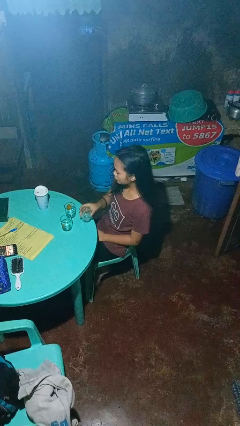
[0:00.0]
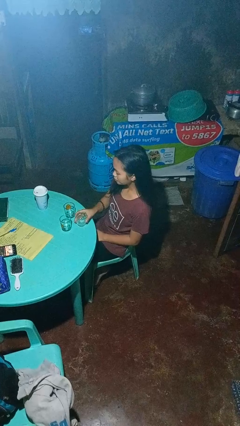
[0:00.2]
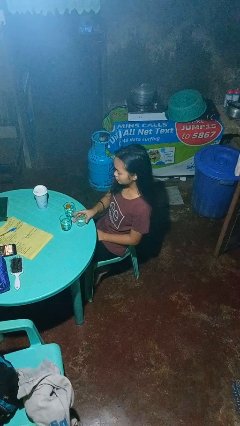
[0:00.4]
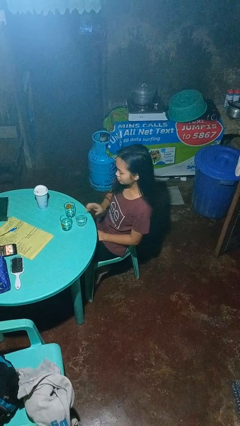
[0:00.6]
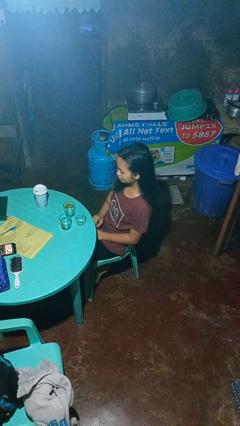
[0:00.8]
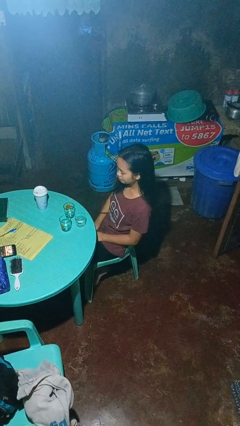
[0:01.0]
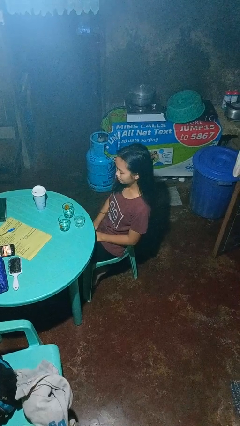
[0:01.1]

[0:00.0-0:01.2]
person puts down object on table

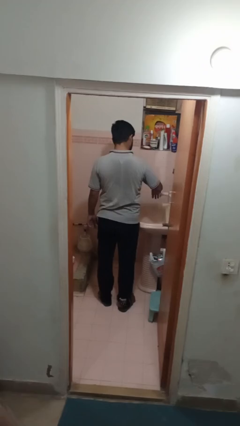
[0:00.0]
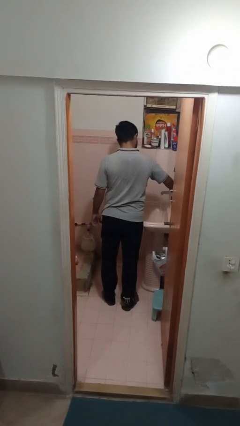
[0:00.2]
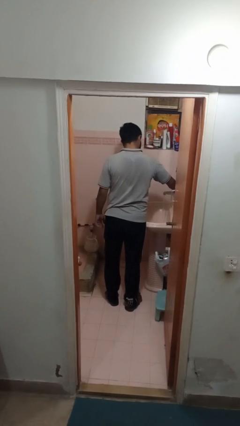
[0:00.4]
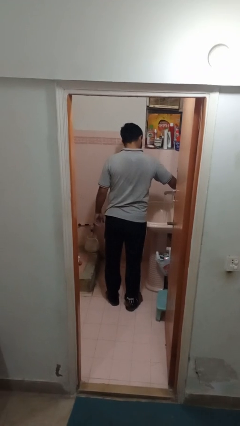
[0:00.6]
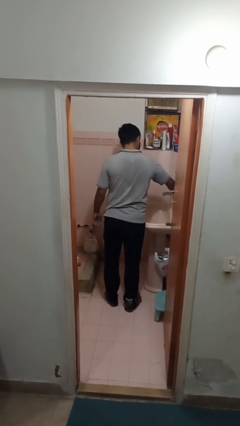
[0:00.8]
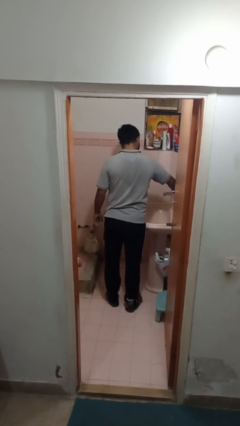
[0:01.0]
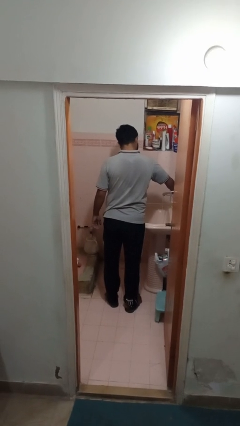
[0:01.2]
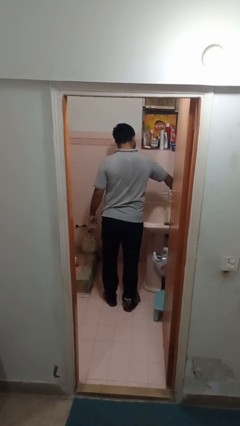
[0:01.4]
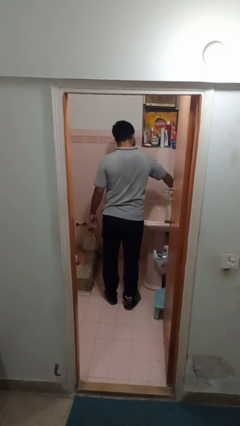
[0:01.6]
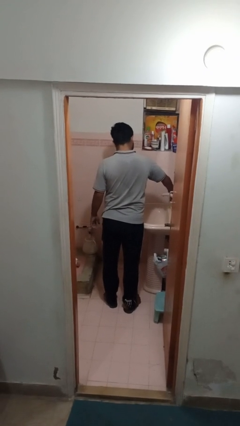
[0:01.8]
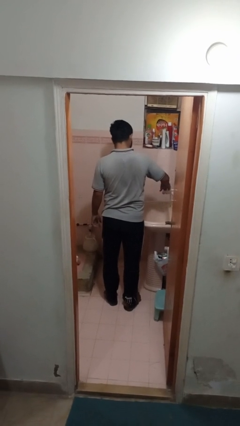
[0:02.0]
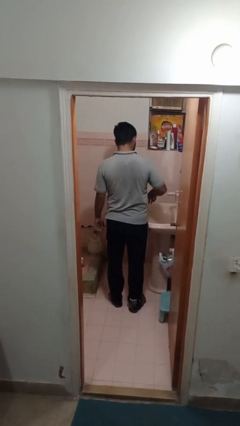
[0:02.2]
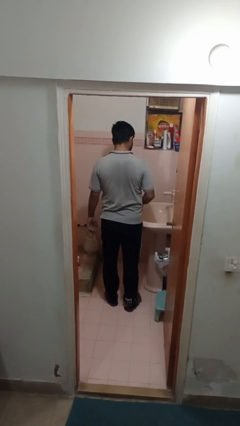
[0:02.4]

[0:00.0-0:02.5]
person turns off faucet

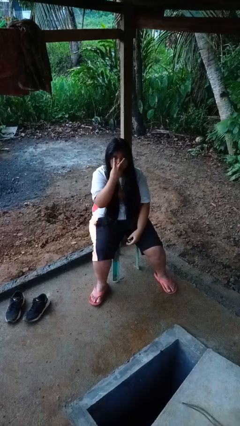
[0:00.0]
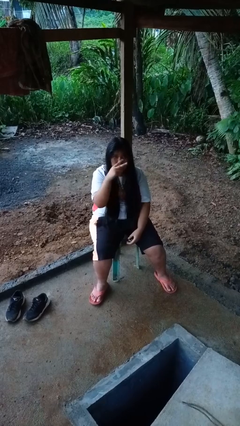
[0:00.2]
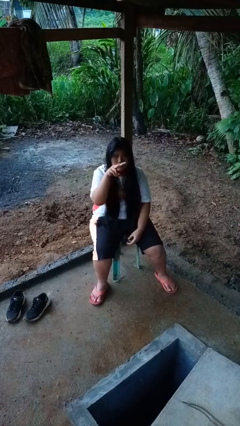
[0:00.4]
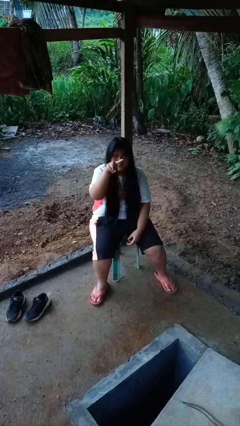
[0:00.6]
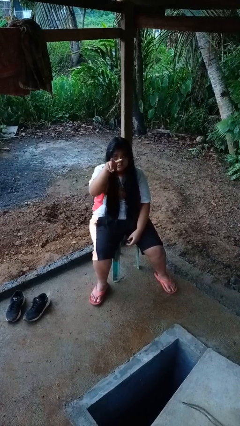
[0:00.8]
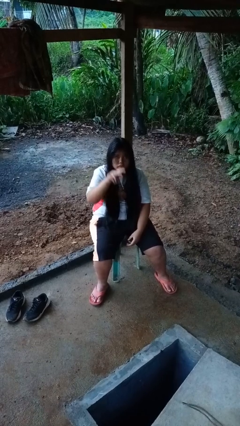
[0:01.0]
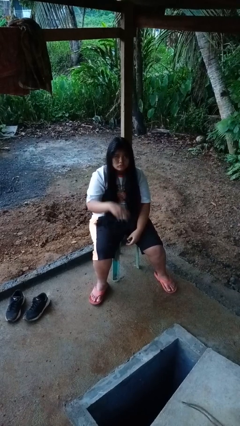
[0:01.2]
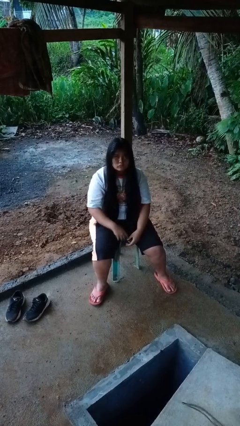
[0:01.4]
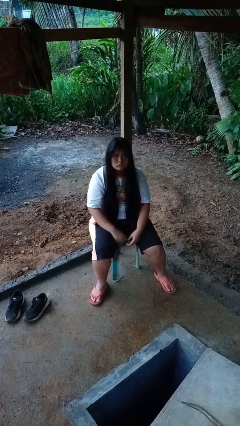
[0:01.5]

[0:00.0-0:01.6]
person gestures watch closely

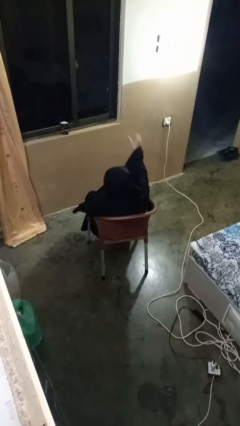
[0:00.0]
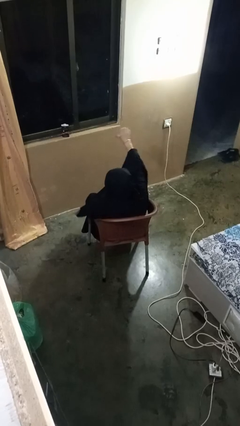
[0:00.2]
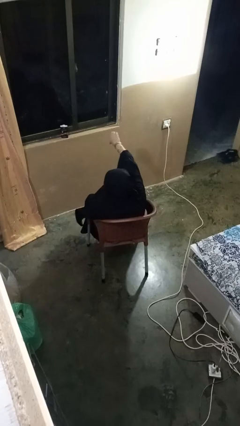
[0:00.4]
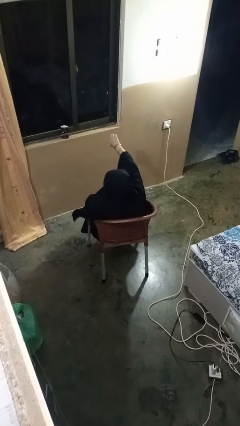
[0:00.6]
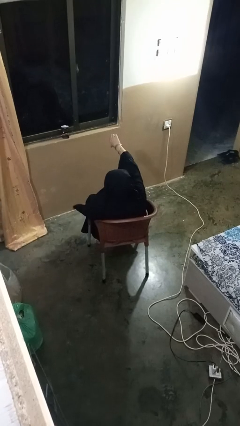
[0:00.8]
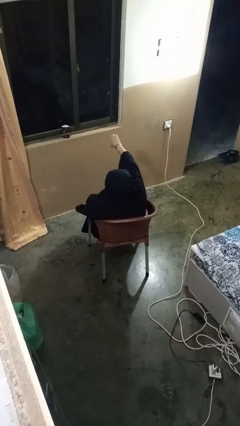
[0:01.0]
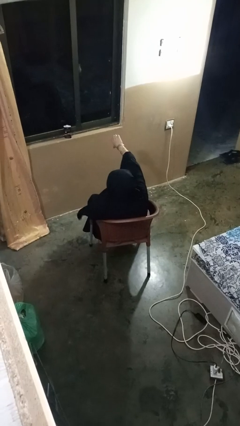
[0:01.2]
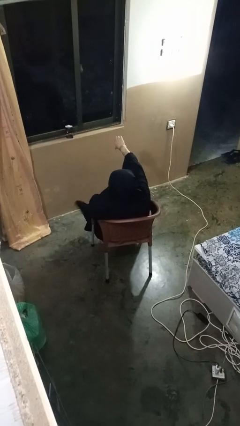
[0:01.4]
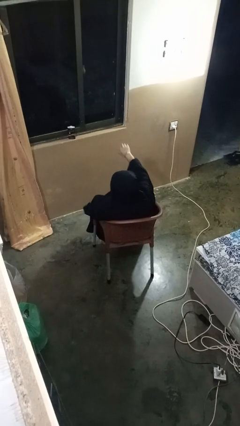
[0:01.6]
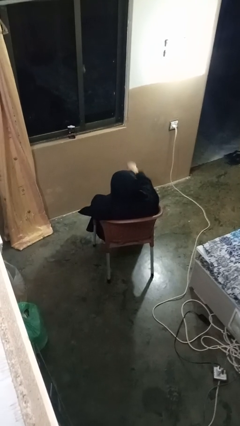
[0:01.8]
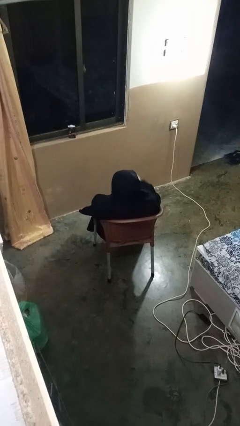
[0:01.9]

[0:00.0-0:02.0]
person gestures thumbs down

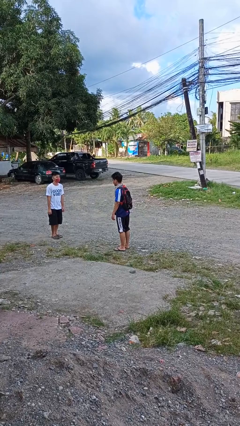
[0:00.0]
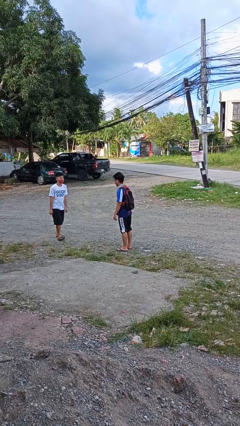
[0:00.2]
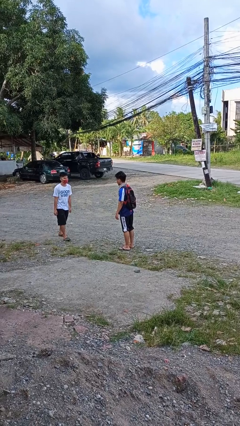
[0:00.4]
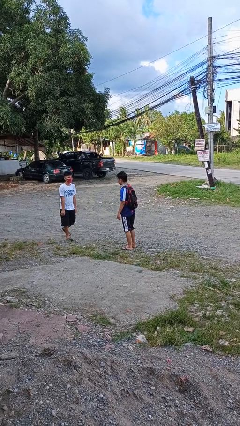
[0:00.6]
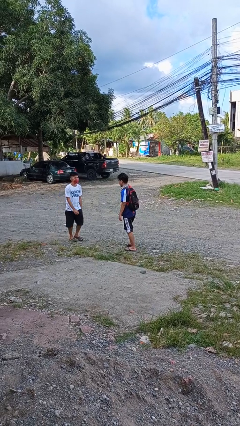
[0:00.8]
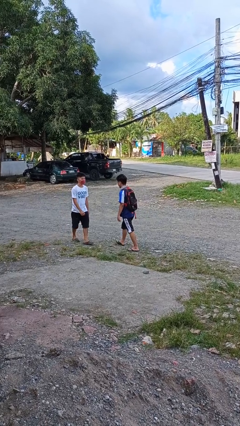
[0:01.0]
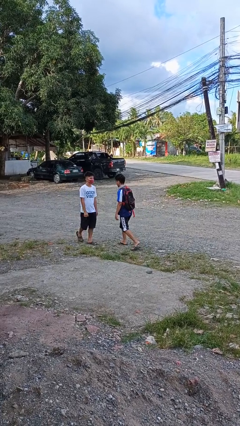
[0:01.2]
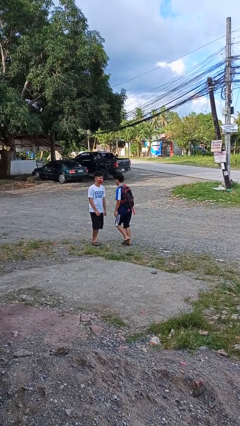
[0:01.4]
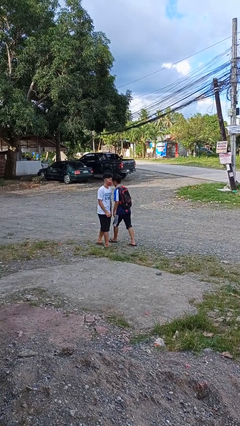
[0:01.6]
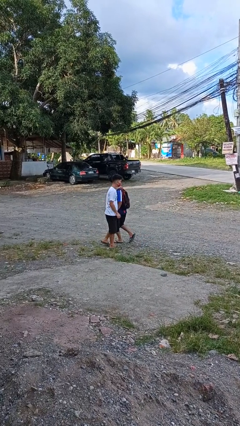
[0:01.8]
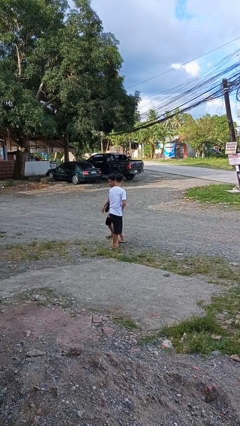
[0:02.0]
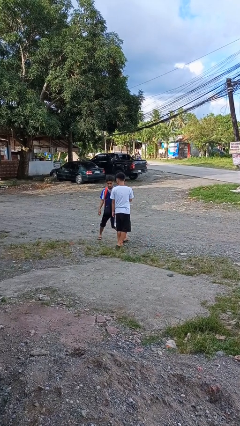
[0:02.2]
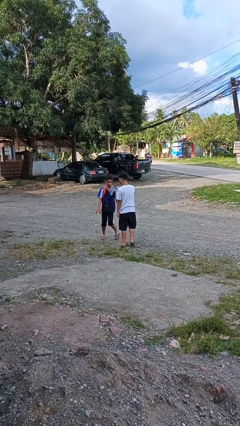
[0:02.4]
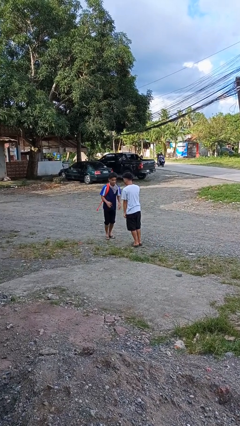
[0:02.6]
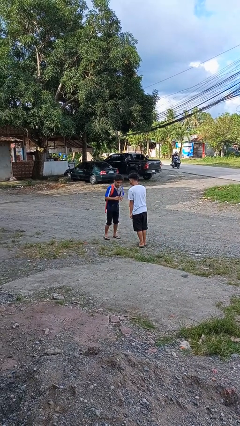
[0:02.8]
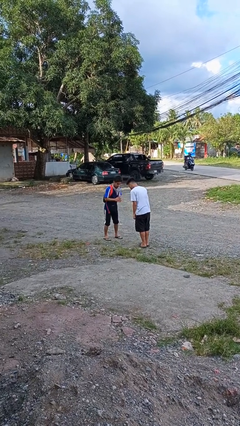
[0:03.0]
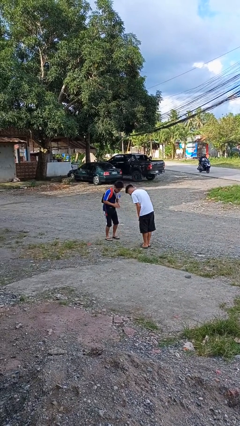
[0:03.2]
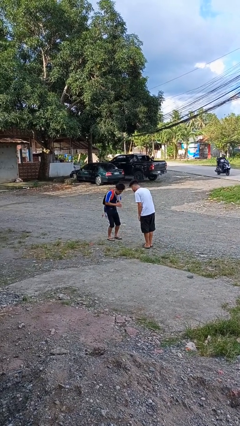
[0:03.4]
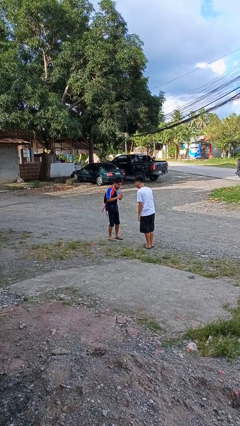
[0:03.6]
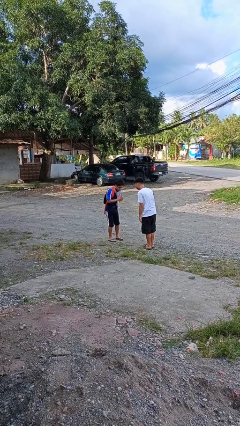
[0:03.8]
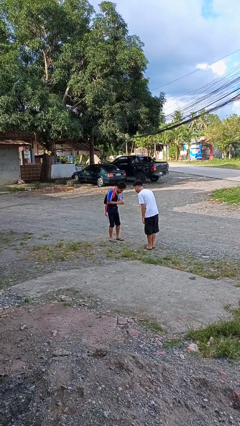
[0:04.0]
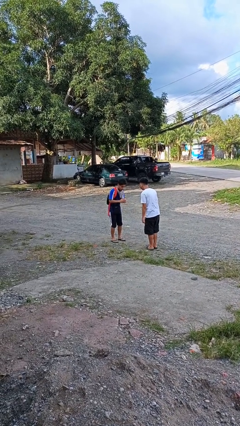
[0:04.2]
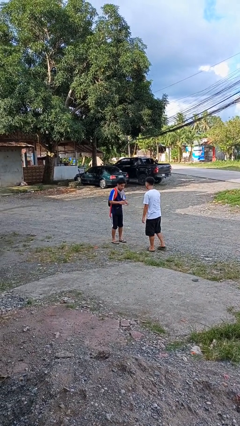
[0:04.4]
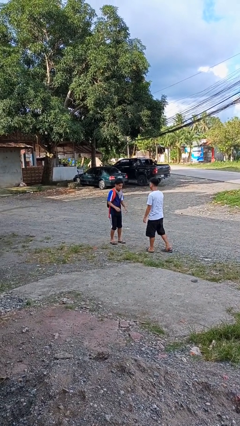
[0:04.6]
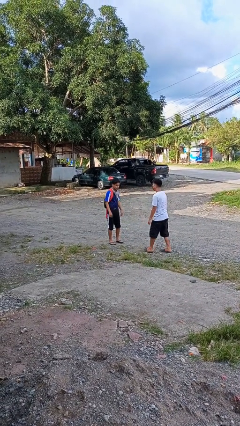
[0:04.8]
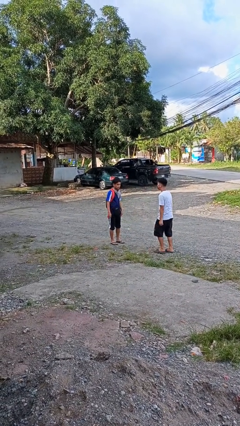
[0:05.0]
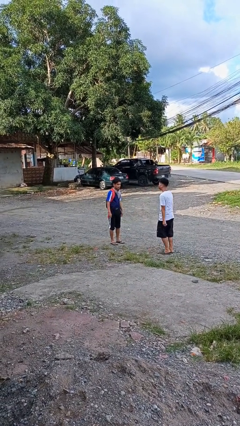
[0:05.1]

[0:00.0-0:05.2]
person bumps into person

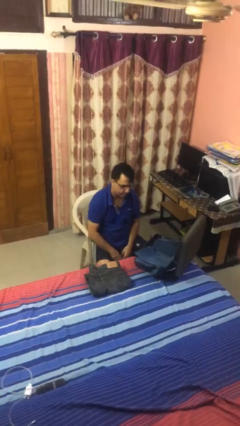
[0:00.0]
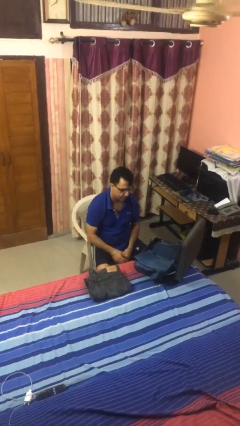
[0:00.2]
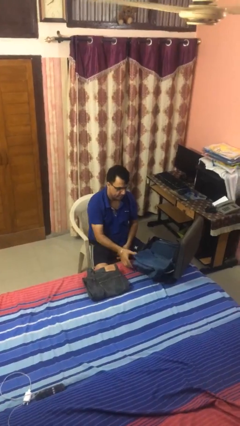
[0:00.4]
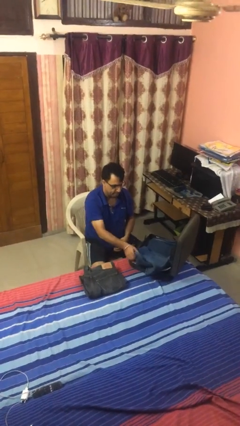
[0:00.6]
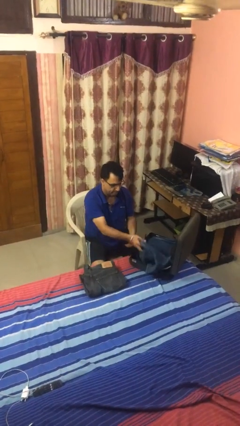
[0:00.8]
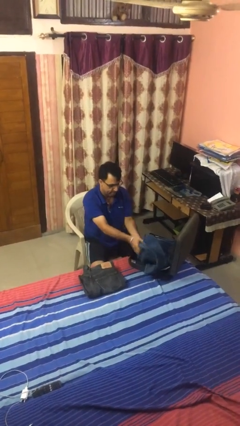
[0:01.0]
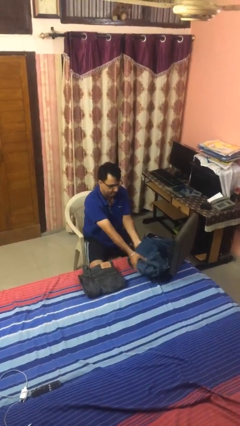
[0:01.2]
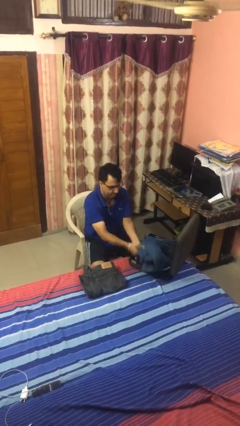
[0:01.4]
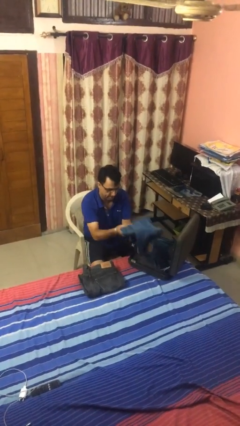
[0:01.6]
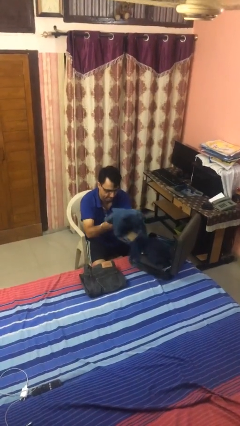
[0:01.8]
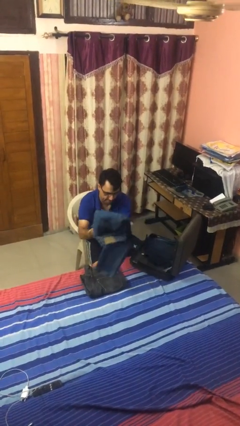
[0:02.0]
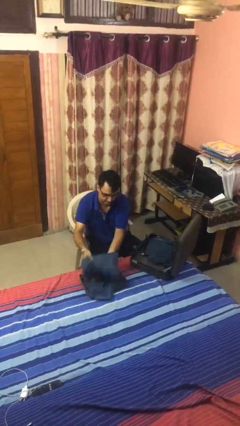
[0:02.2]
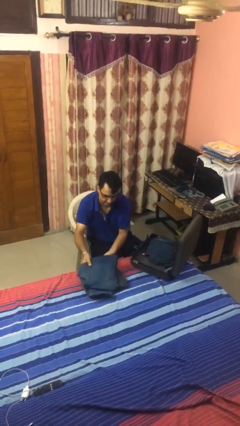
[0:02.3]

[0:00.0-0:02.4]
person unloads clothes from suitcase

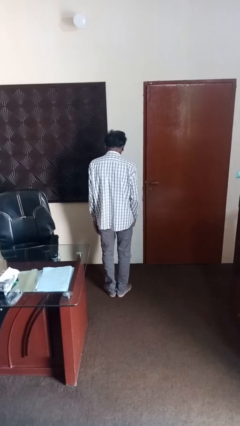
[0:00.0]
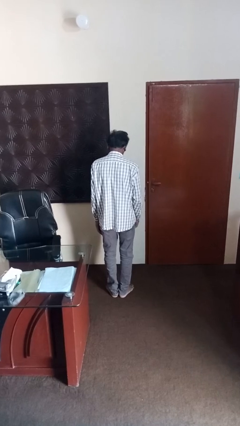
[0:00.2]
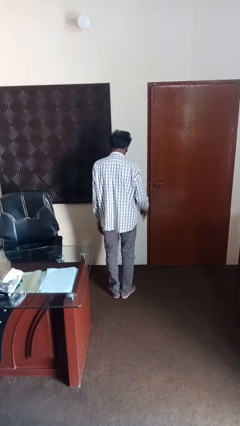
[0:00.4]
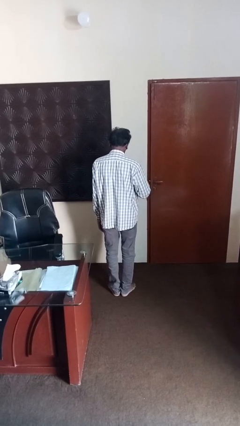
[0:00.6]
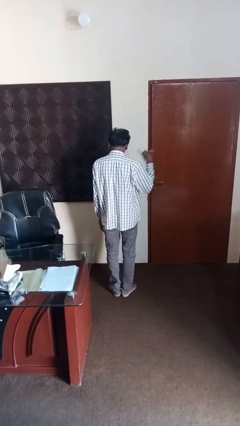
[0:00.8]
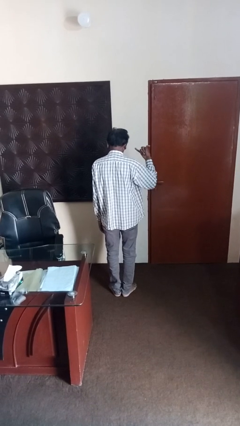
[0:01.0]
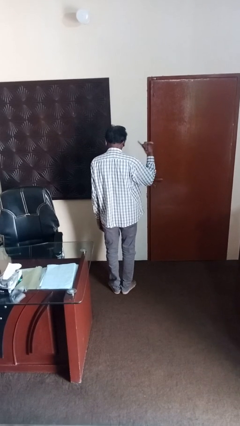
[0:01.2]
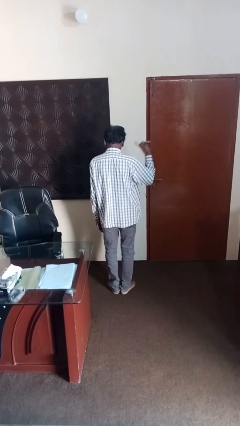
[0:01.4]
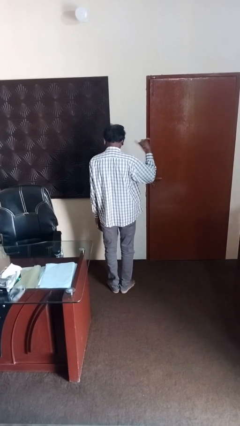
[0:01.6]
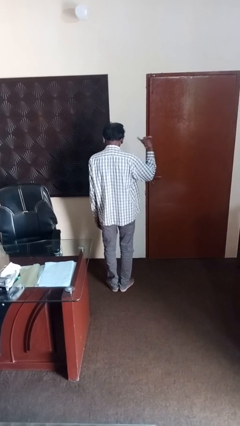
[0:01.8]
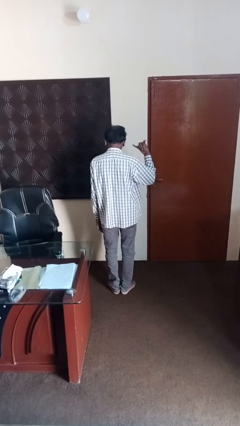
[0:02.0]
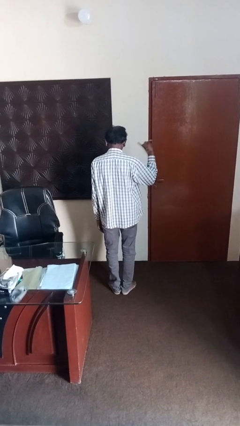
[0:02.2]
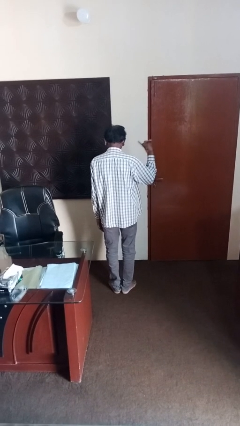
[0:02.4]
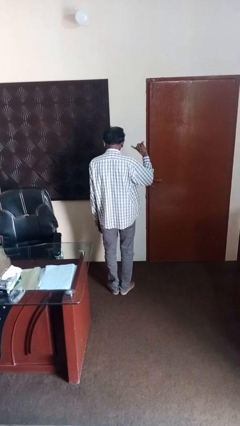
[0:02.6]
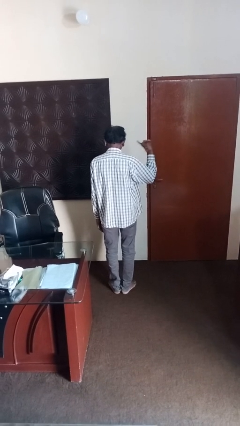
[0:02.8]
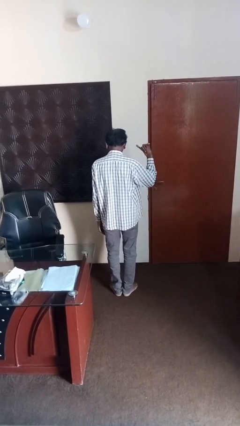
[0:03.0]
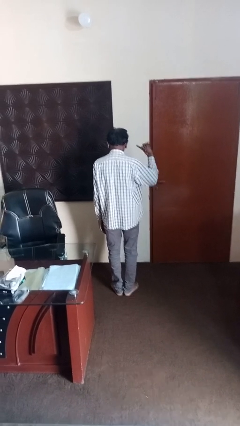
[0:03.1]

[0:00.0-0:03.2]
person gestures hang loose
